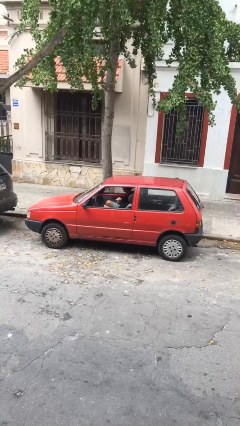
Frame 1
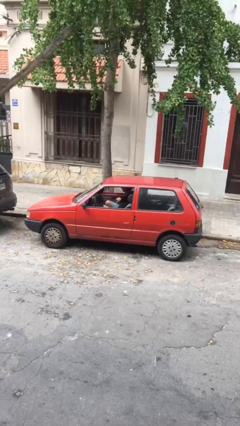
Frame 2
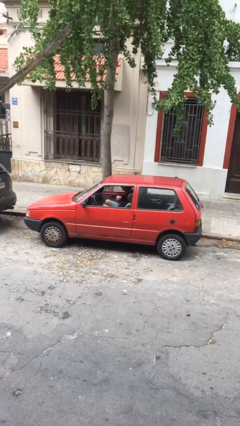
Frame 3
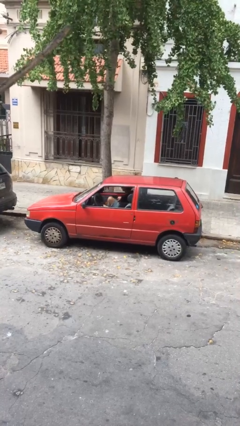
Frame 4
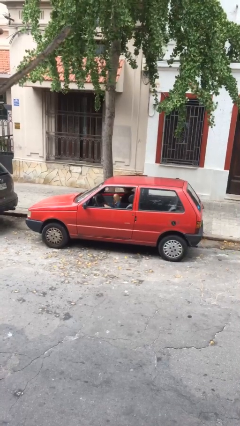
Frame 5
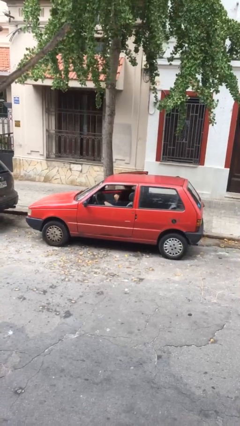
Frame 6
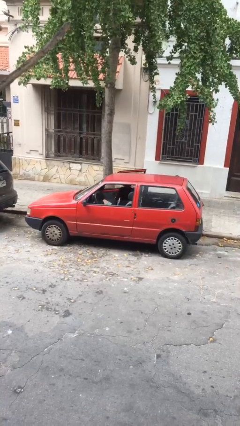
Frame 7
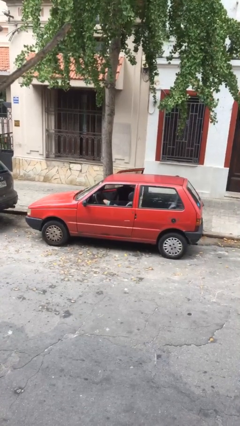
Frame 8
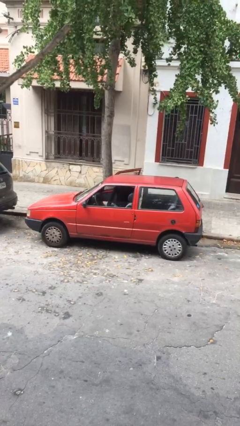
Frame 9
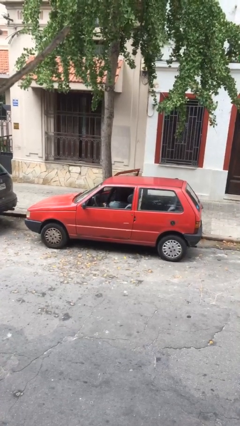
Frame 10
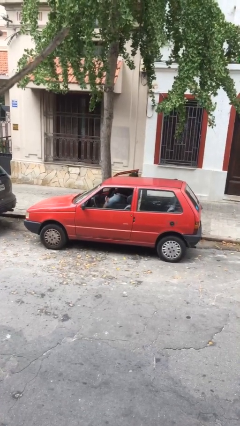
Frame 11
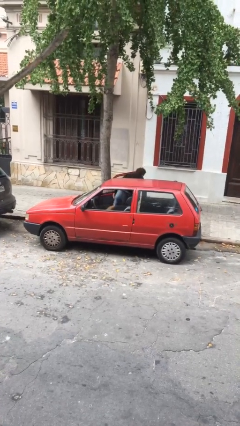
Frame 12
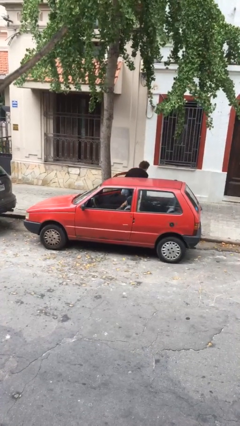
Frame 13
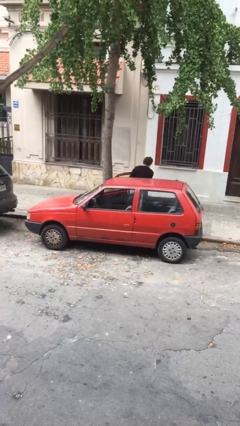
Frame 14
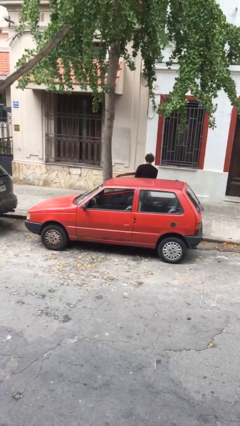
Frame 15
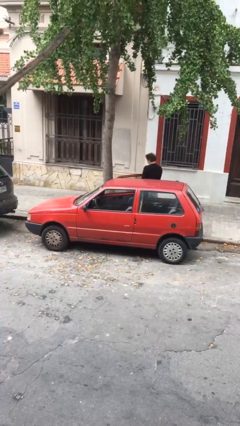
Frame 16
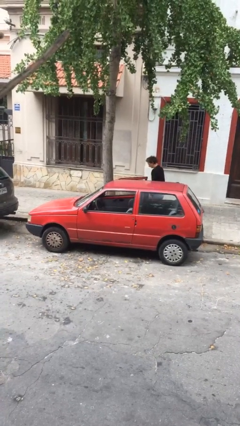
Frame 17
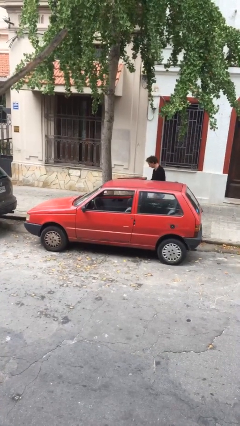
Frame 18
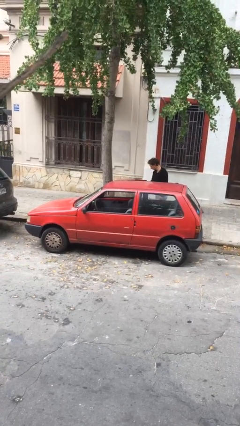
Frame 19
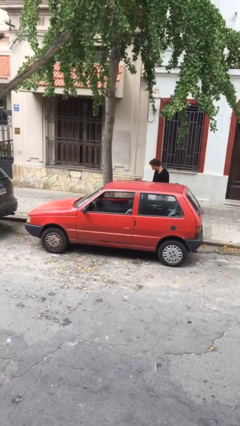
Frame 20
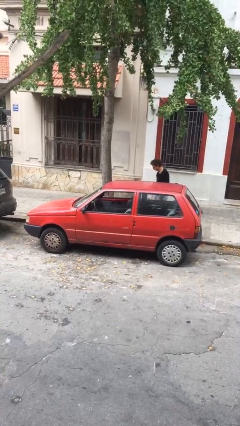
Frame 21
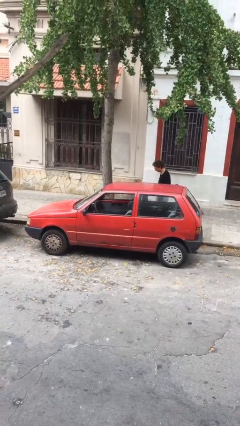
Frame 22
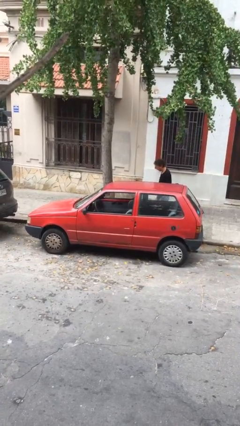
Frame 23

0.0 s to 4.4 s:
car drops off person

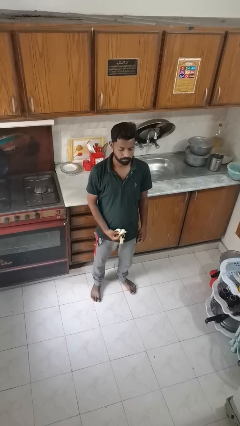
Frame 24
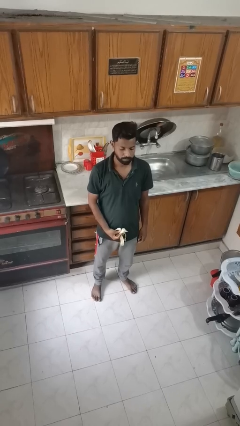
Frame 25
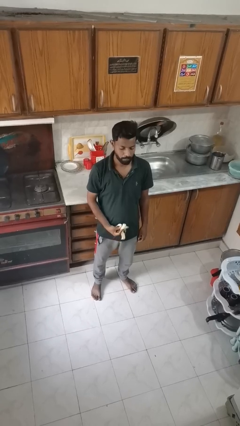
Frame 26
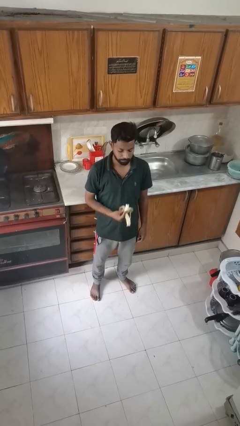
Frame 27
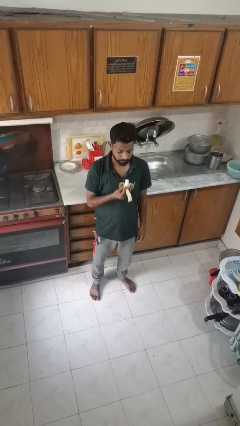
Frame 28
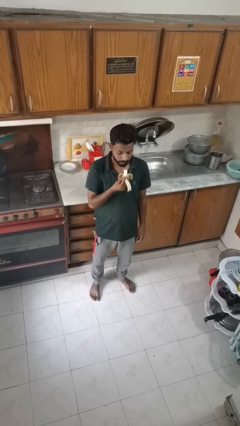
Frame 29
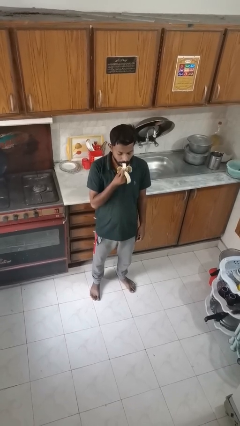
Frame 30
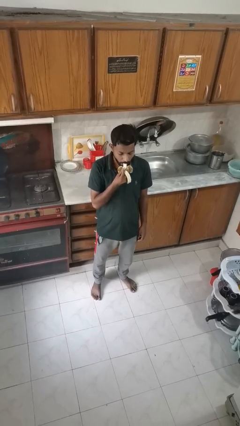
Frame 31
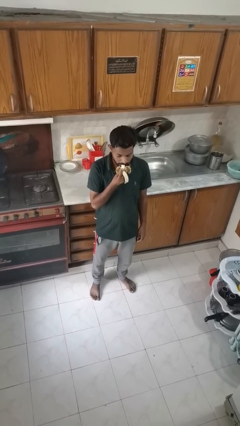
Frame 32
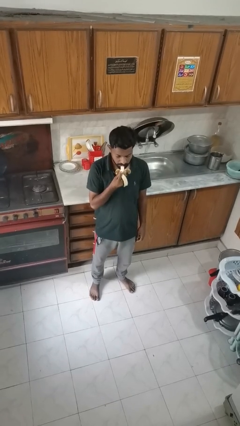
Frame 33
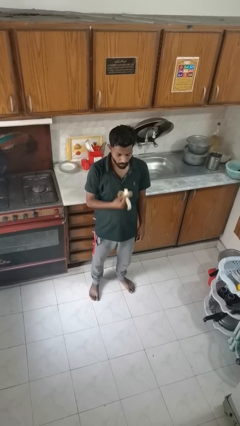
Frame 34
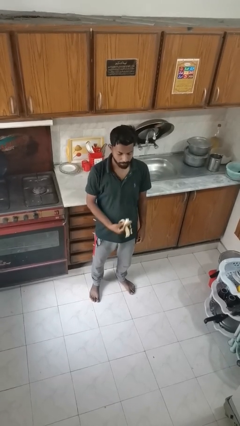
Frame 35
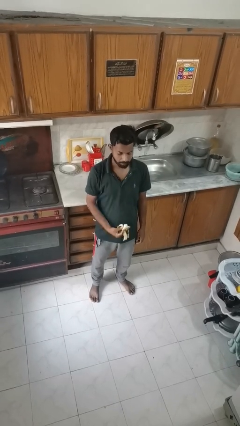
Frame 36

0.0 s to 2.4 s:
person eats banana

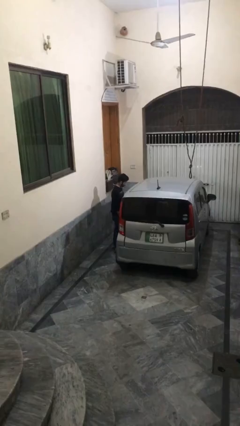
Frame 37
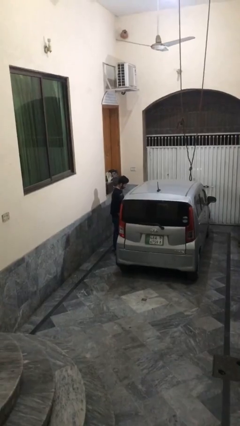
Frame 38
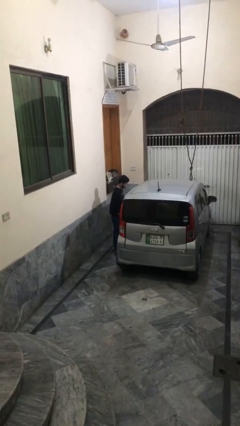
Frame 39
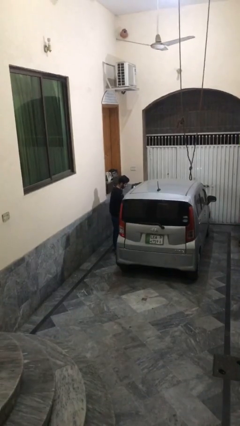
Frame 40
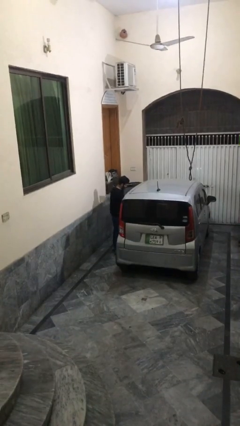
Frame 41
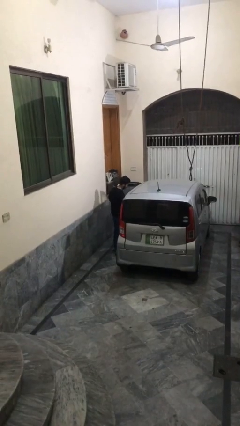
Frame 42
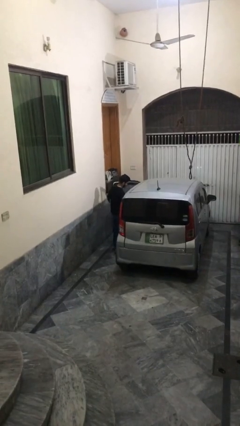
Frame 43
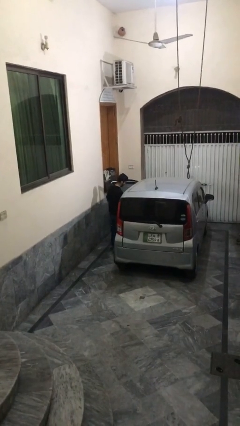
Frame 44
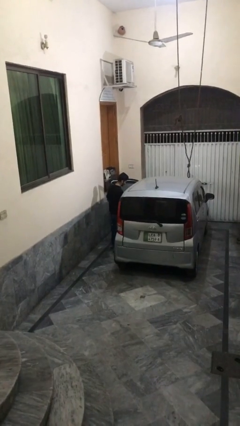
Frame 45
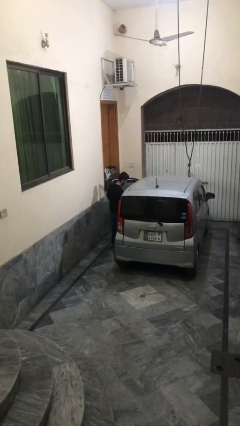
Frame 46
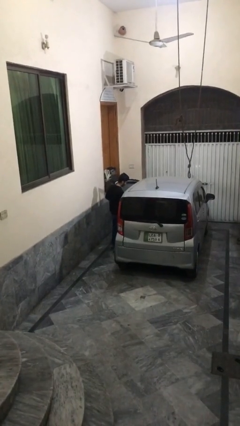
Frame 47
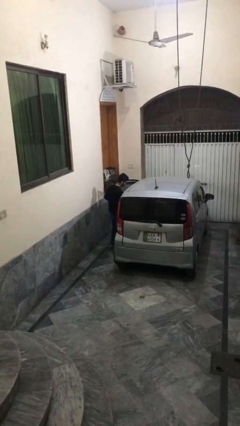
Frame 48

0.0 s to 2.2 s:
person opens car door

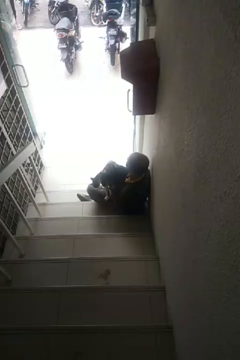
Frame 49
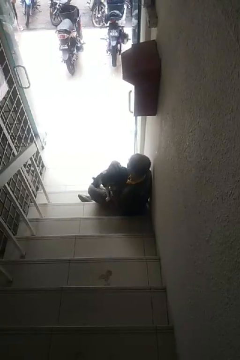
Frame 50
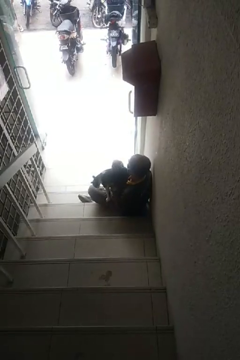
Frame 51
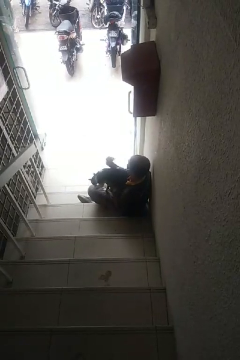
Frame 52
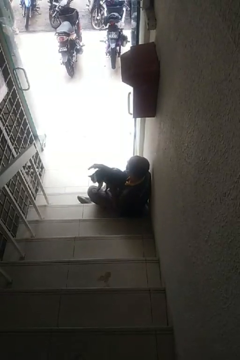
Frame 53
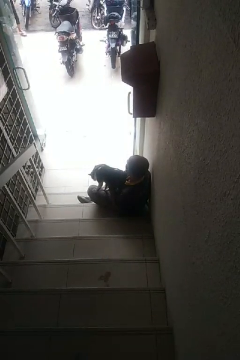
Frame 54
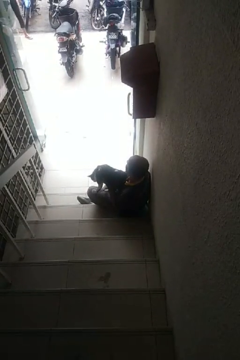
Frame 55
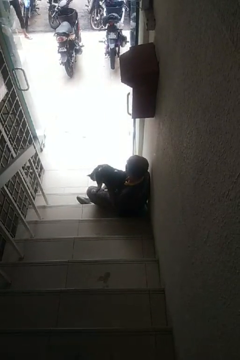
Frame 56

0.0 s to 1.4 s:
person pets cat

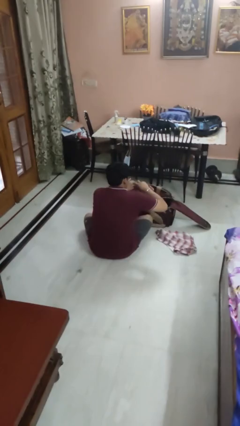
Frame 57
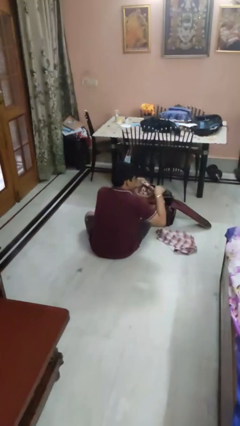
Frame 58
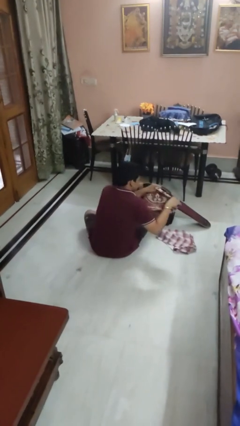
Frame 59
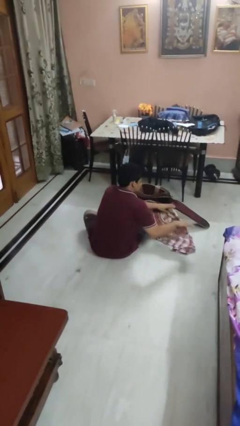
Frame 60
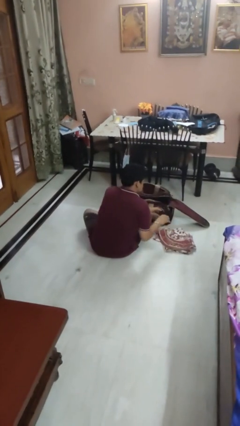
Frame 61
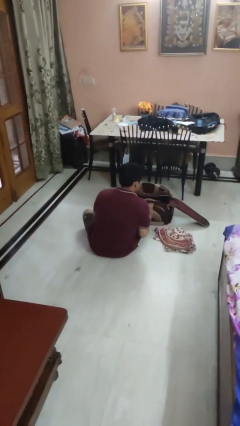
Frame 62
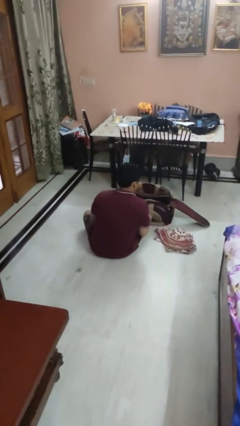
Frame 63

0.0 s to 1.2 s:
person unloads clothes from suitcase

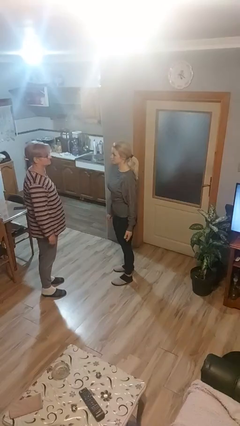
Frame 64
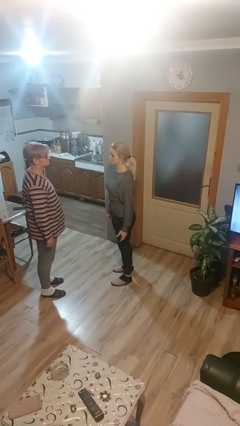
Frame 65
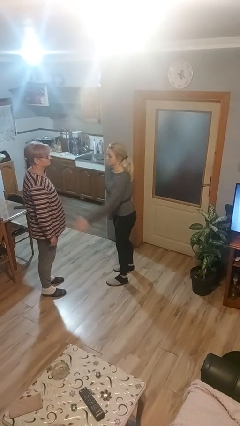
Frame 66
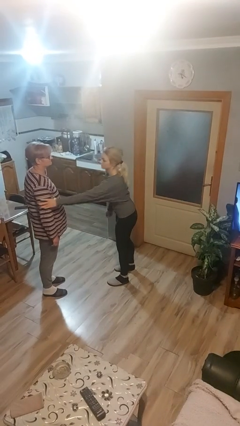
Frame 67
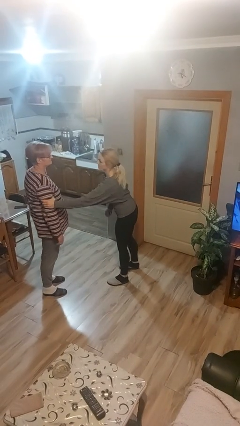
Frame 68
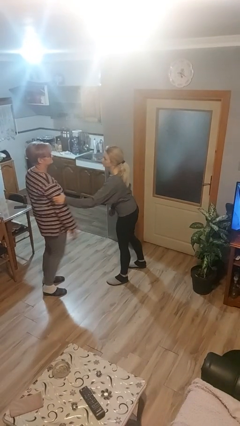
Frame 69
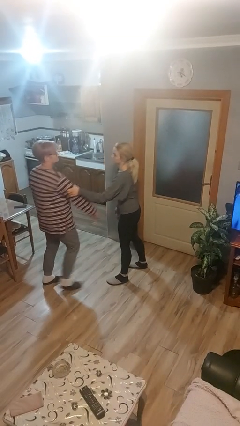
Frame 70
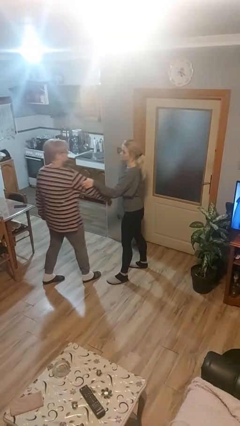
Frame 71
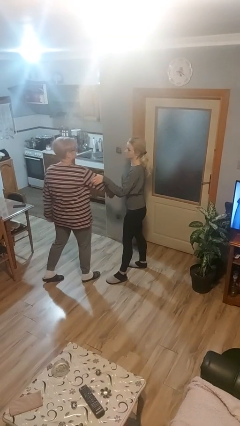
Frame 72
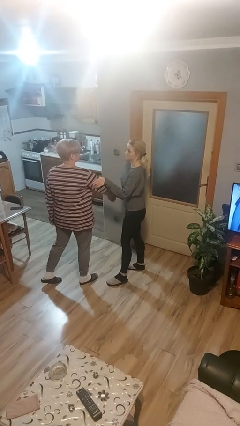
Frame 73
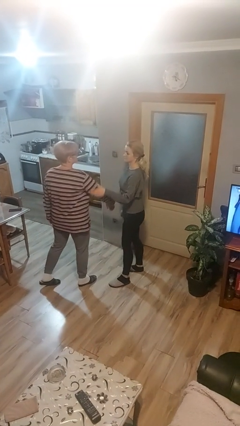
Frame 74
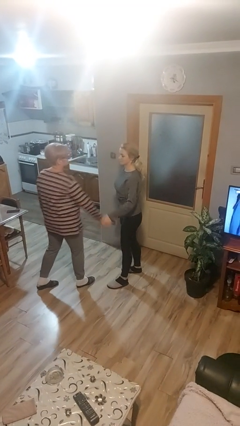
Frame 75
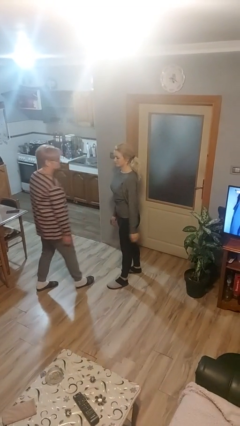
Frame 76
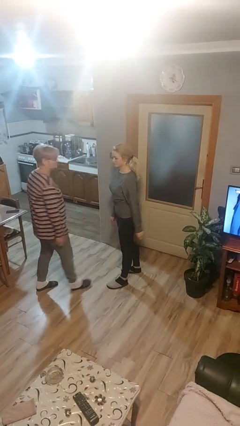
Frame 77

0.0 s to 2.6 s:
person grabs person by bicep

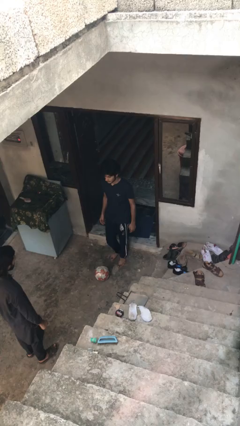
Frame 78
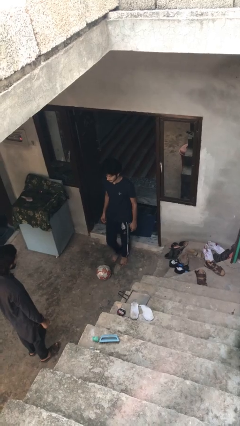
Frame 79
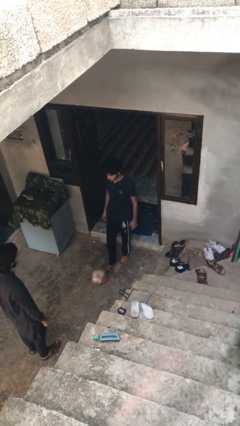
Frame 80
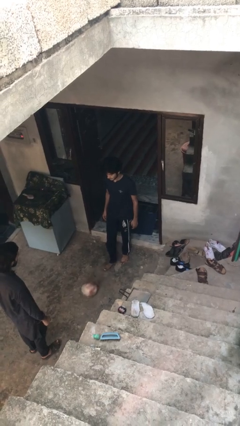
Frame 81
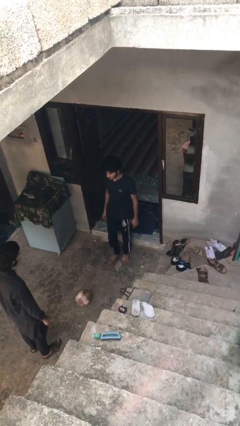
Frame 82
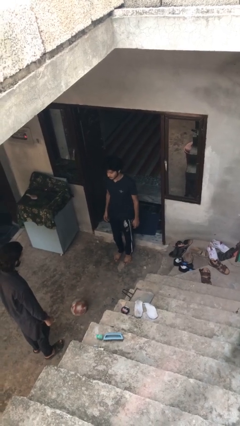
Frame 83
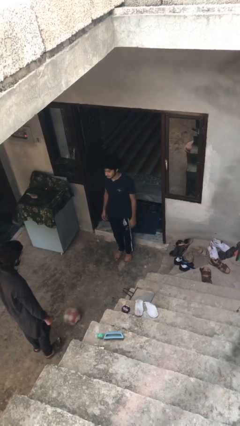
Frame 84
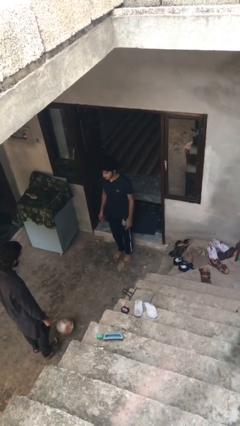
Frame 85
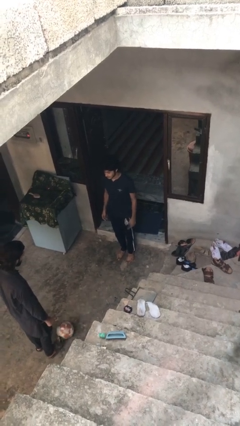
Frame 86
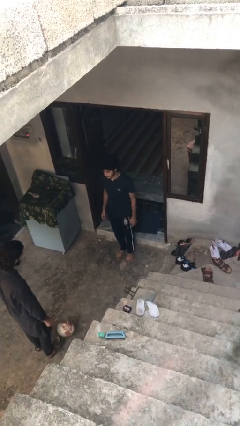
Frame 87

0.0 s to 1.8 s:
person kicks object to person

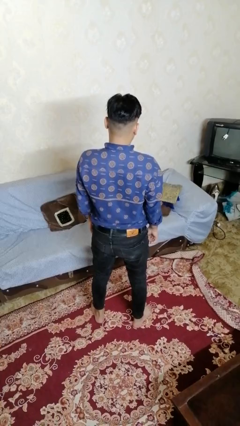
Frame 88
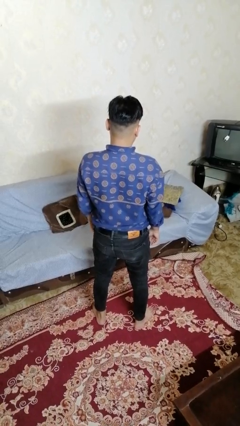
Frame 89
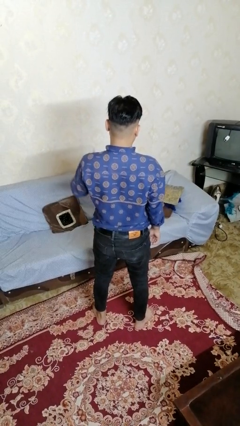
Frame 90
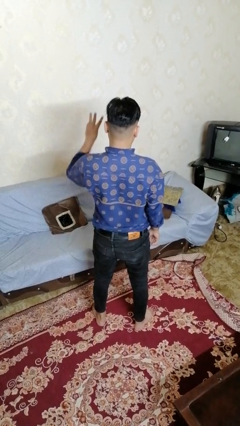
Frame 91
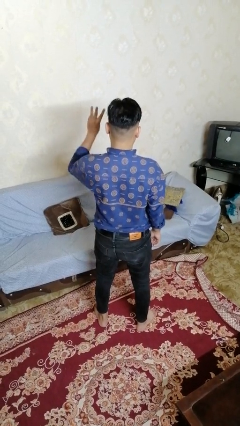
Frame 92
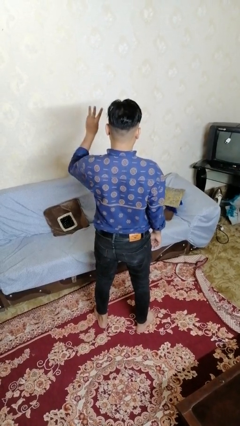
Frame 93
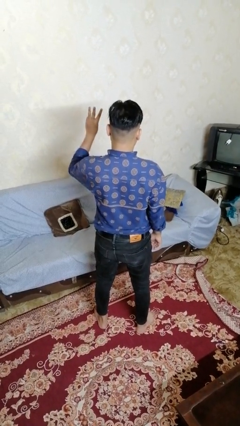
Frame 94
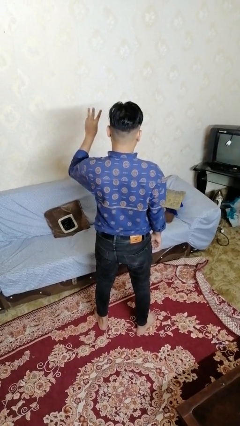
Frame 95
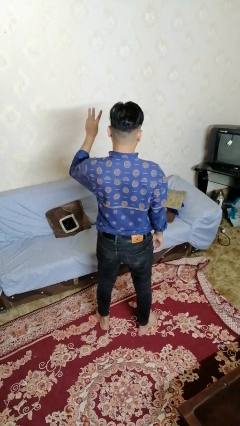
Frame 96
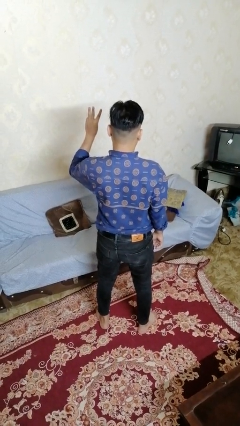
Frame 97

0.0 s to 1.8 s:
person gestures number three
